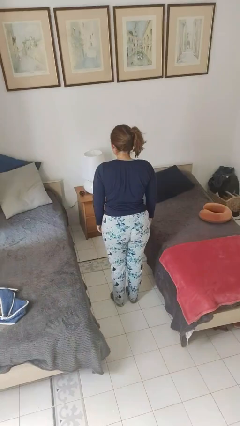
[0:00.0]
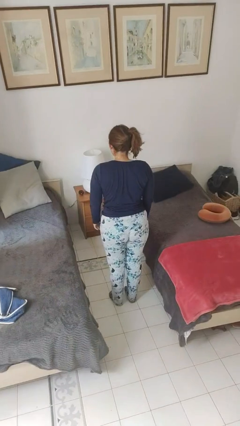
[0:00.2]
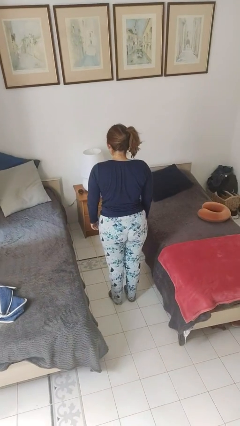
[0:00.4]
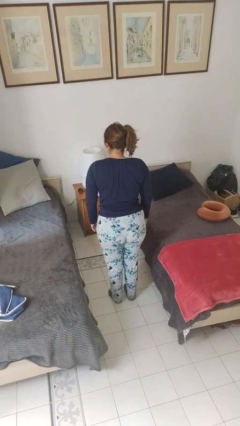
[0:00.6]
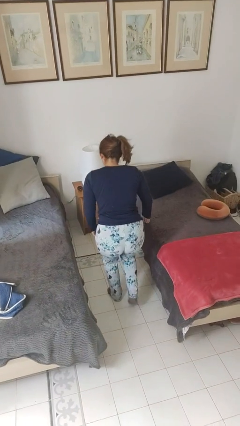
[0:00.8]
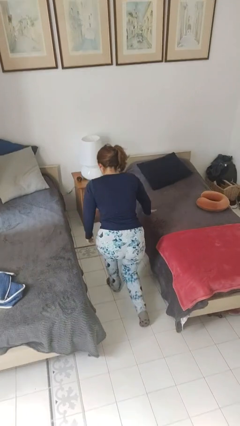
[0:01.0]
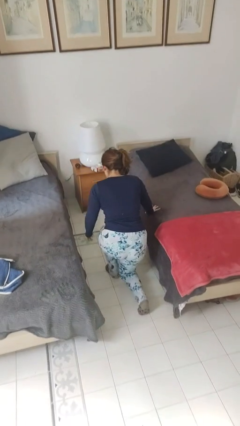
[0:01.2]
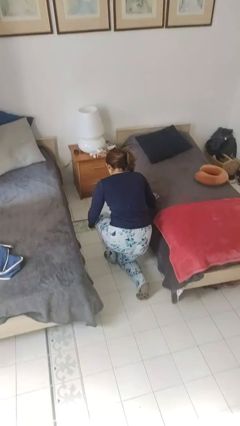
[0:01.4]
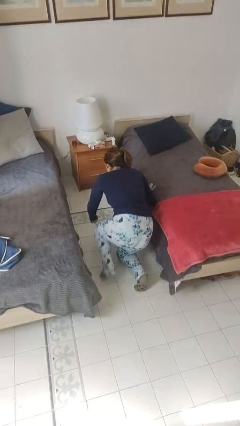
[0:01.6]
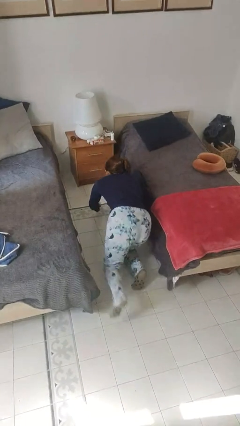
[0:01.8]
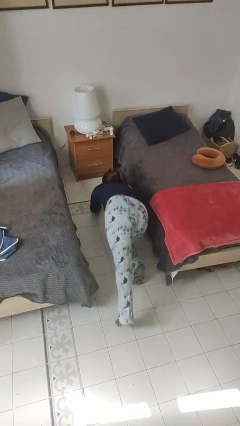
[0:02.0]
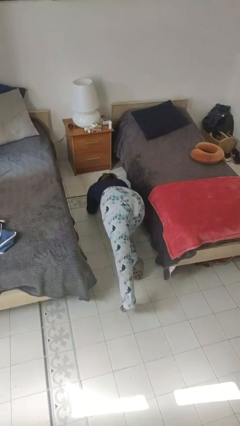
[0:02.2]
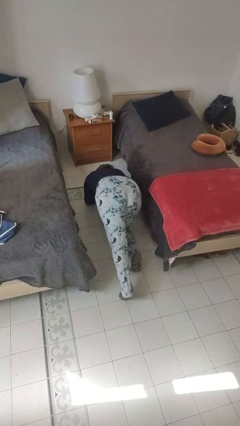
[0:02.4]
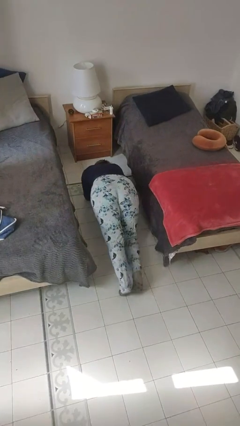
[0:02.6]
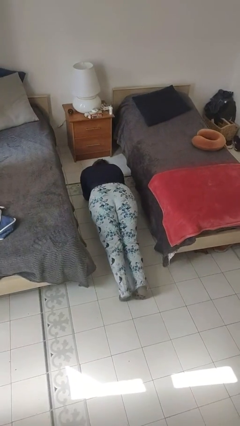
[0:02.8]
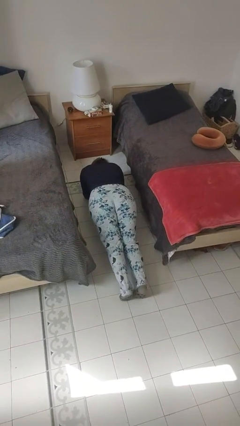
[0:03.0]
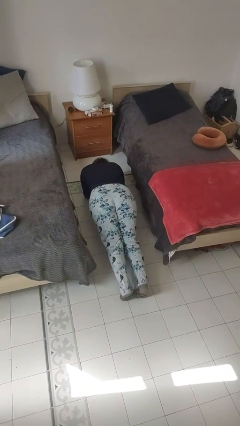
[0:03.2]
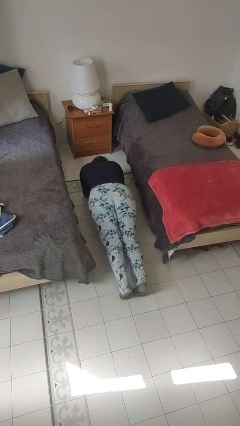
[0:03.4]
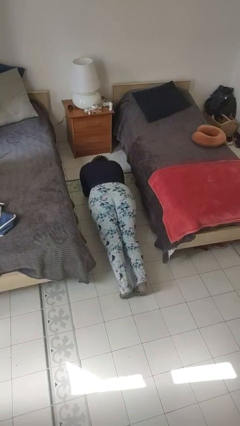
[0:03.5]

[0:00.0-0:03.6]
person exercises with plank

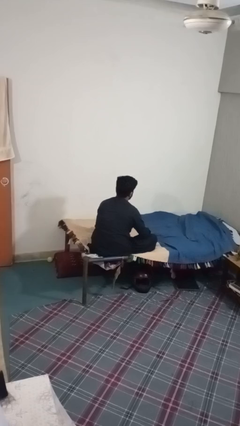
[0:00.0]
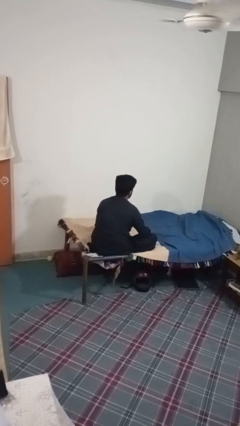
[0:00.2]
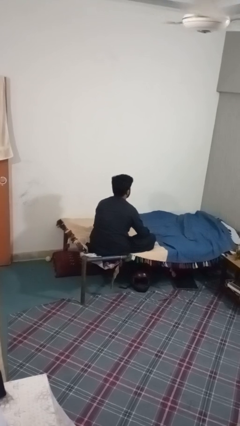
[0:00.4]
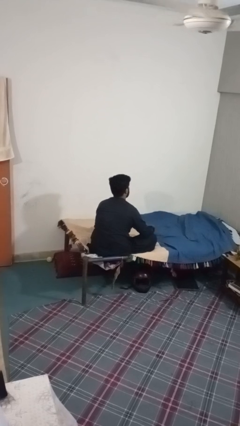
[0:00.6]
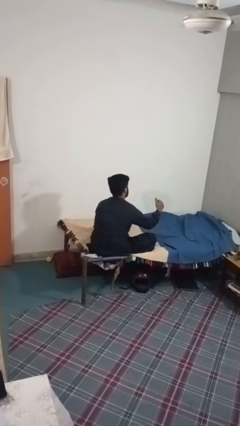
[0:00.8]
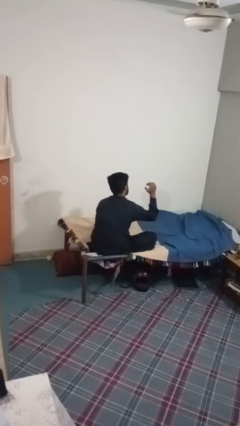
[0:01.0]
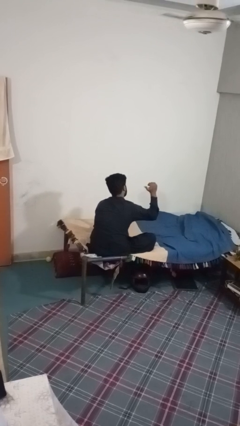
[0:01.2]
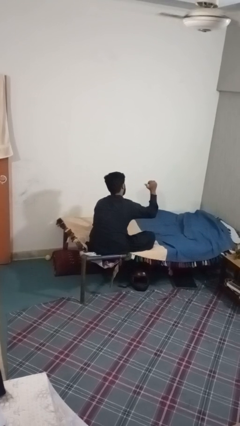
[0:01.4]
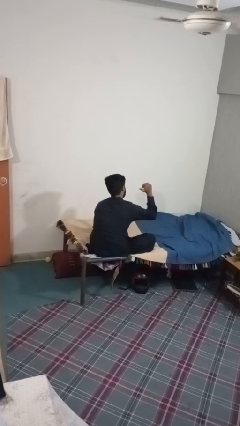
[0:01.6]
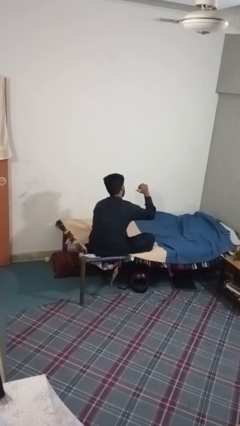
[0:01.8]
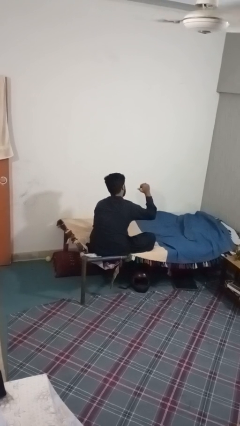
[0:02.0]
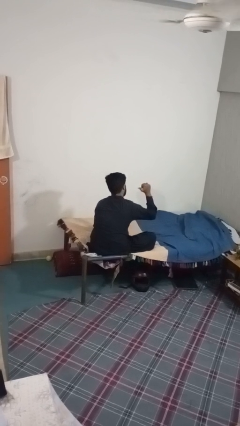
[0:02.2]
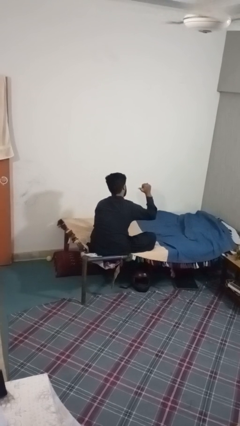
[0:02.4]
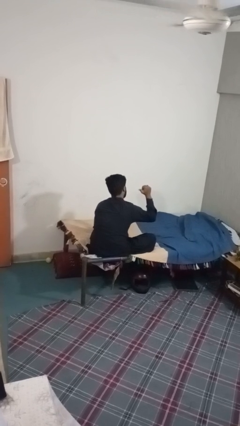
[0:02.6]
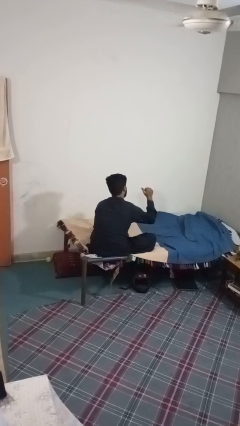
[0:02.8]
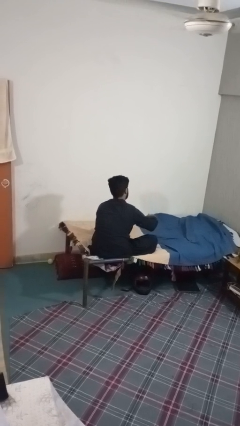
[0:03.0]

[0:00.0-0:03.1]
person gestures behind me

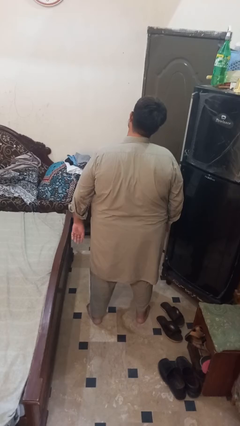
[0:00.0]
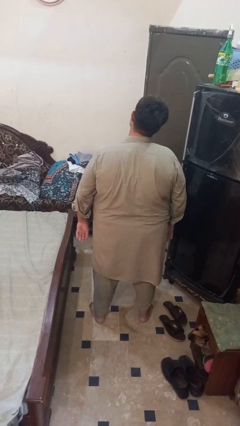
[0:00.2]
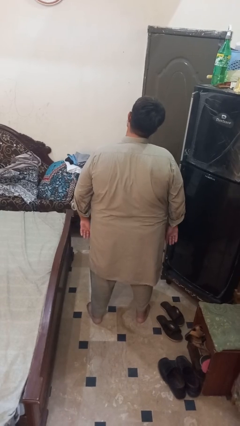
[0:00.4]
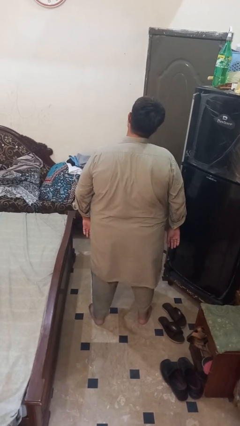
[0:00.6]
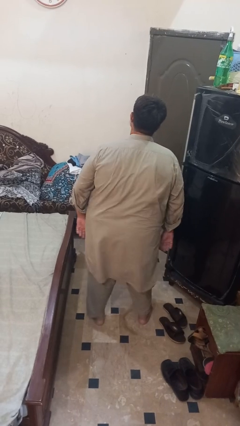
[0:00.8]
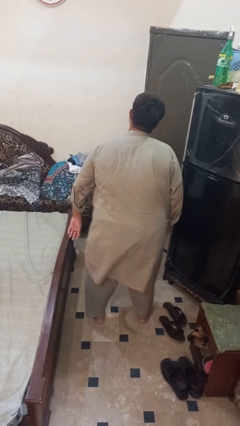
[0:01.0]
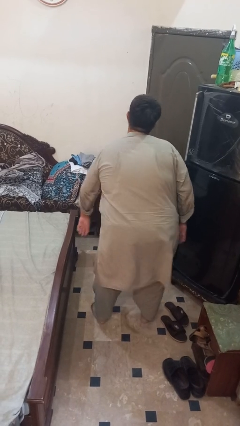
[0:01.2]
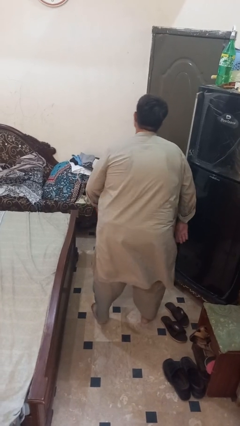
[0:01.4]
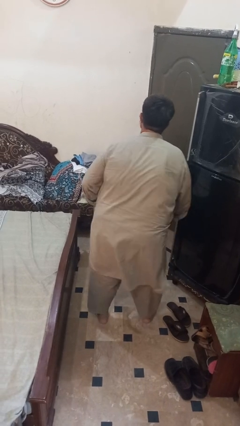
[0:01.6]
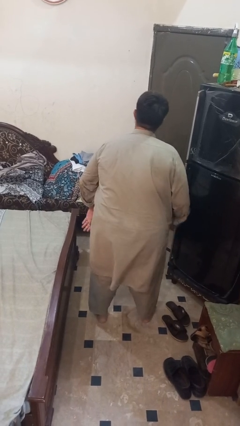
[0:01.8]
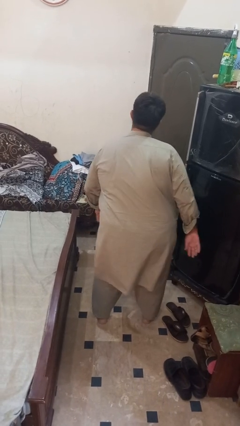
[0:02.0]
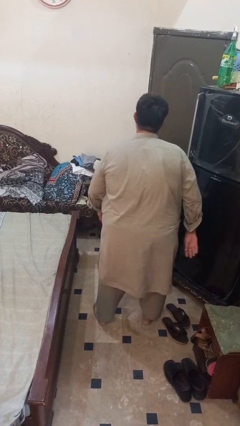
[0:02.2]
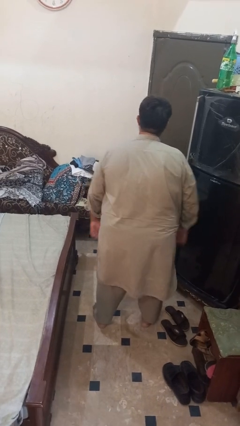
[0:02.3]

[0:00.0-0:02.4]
person wiggles hips

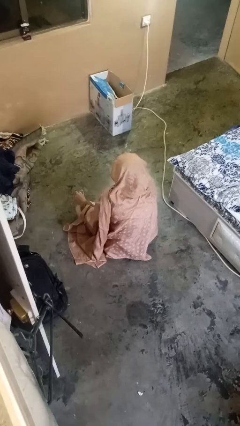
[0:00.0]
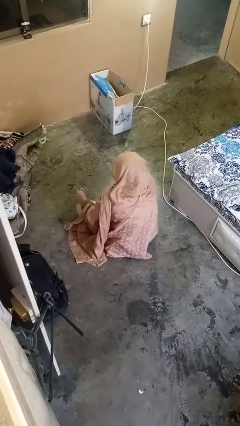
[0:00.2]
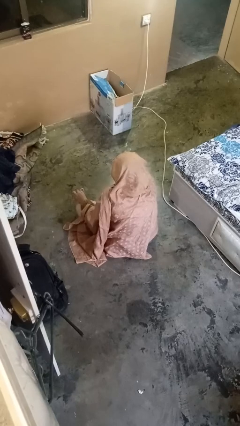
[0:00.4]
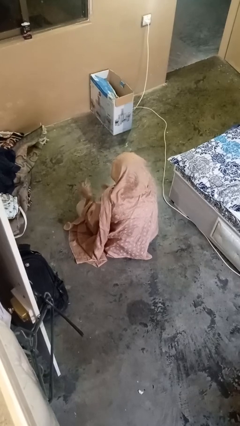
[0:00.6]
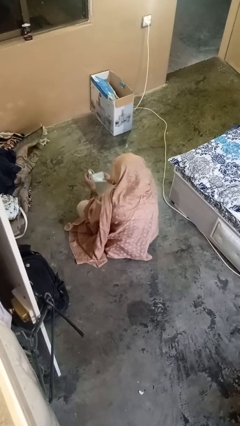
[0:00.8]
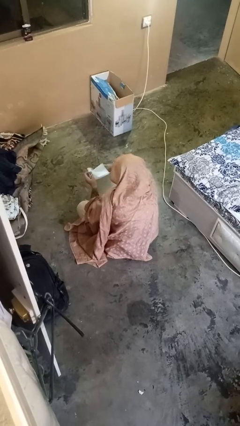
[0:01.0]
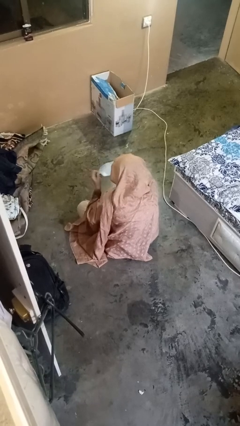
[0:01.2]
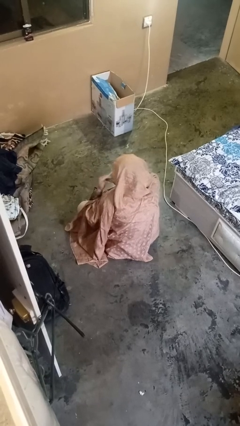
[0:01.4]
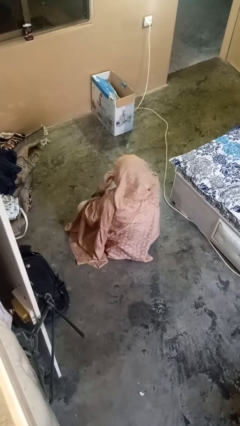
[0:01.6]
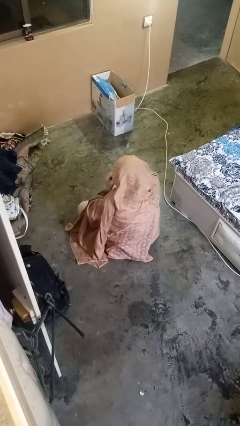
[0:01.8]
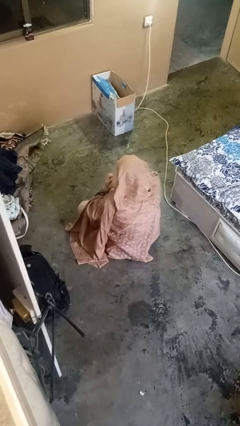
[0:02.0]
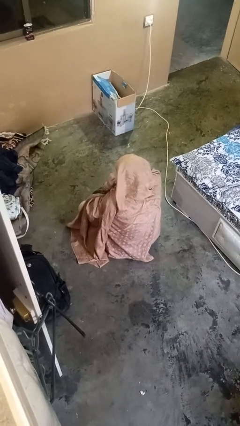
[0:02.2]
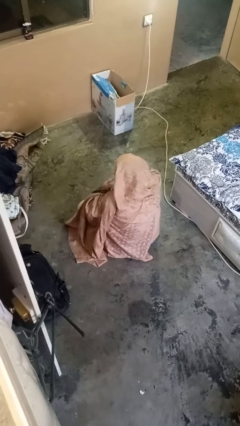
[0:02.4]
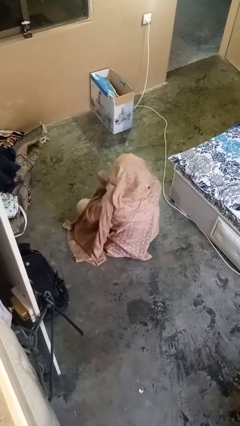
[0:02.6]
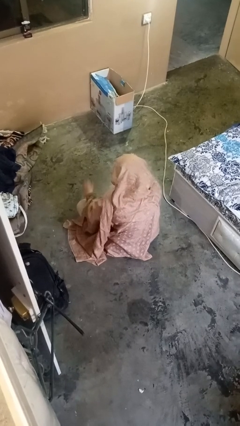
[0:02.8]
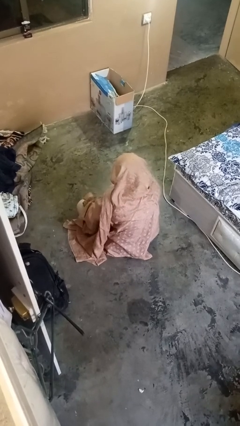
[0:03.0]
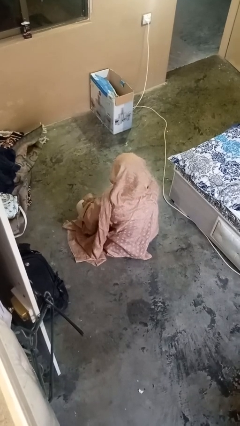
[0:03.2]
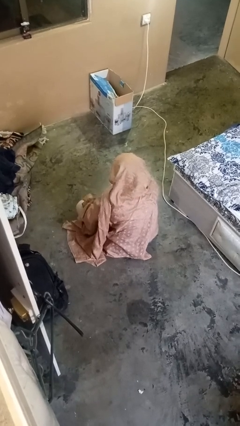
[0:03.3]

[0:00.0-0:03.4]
person puts on facemask

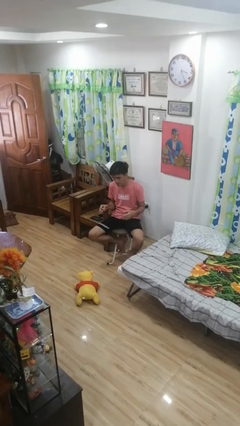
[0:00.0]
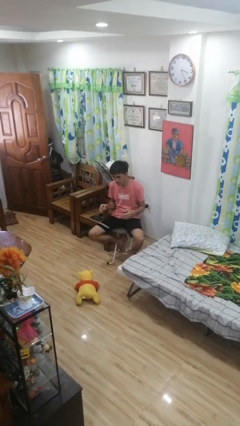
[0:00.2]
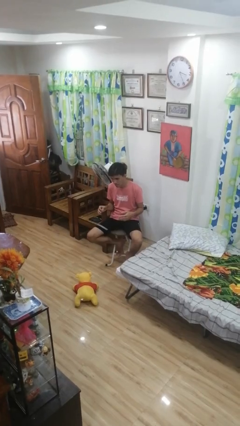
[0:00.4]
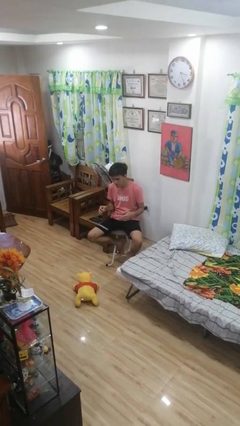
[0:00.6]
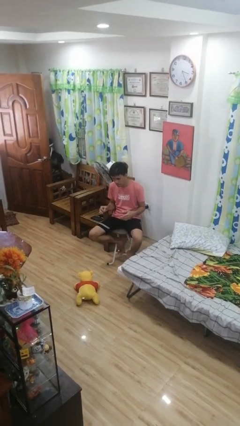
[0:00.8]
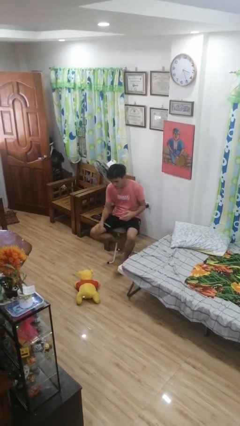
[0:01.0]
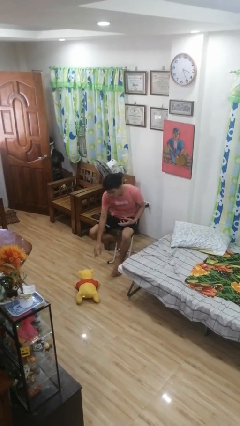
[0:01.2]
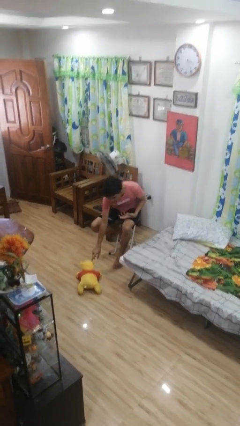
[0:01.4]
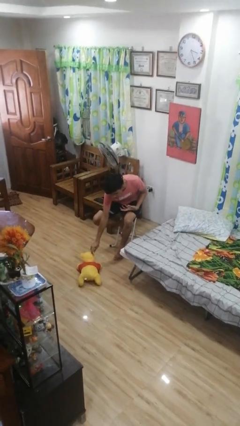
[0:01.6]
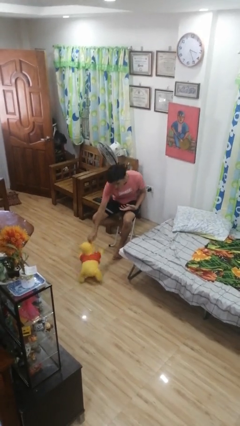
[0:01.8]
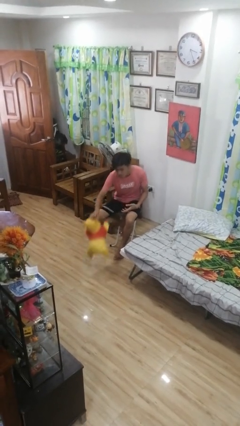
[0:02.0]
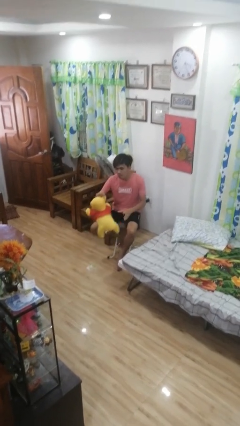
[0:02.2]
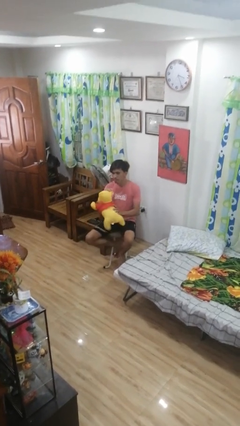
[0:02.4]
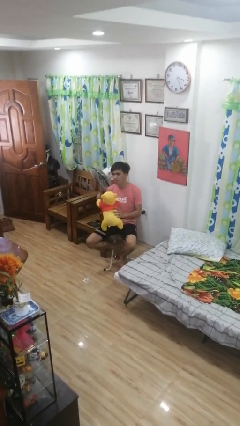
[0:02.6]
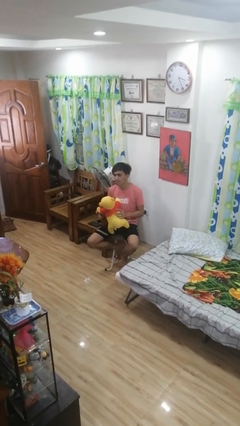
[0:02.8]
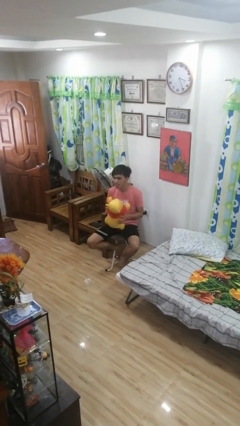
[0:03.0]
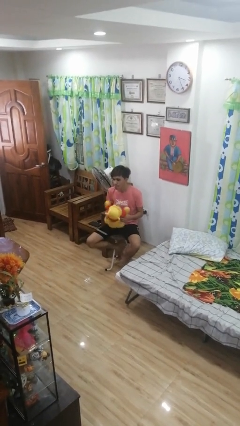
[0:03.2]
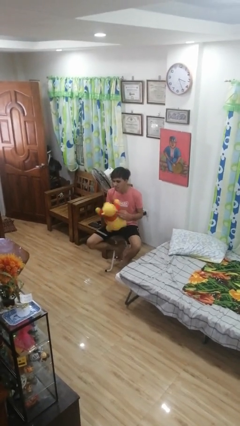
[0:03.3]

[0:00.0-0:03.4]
person picks up object from floor

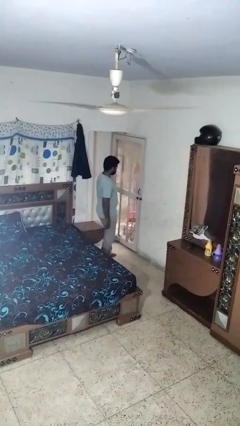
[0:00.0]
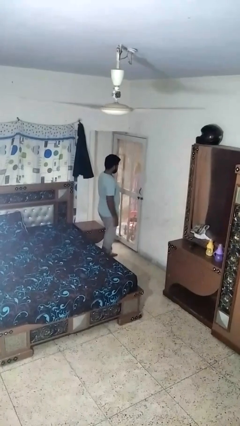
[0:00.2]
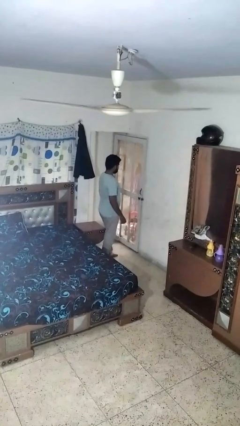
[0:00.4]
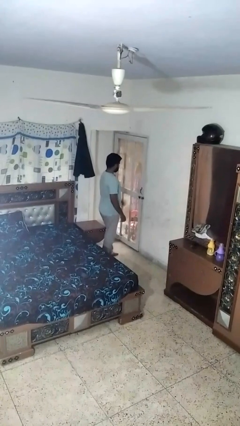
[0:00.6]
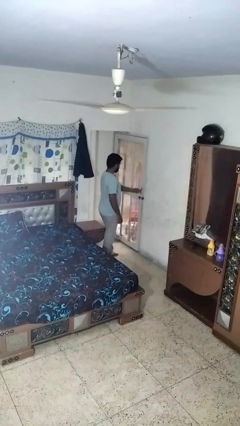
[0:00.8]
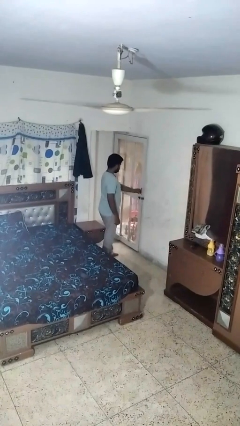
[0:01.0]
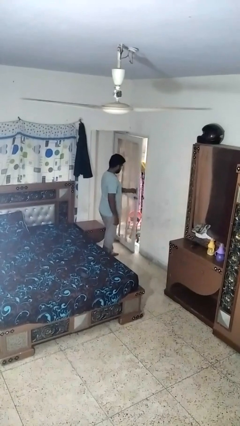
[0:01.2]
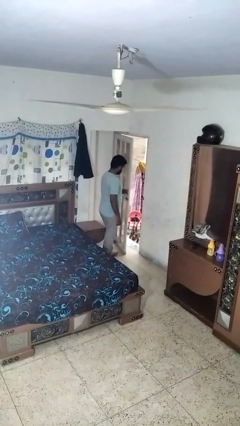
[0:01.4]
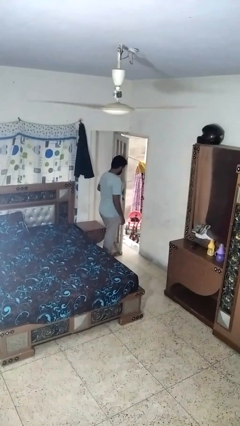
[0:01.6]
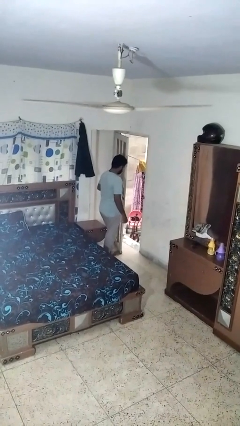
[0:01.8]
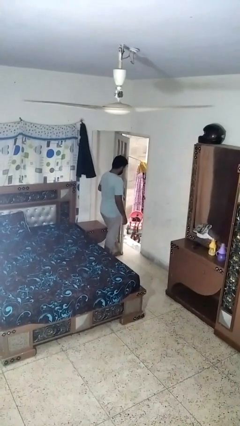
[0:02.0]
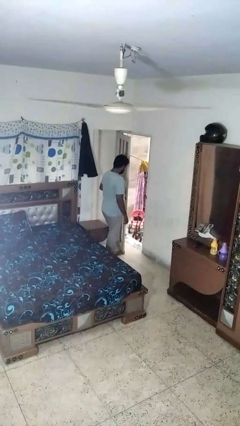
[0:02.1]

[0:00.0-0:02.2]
person opens facility door
